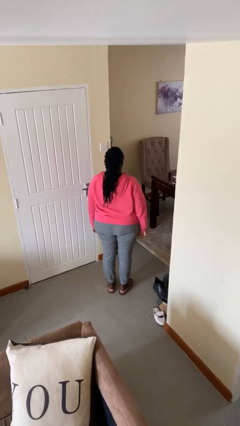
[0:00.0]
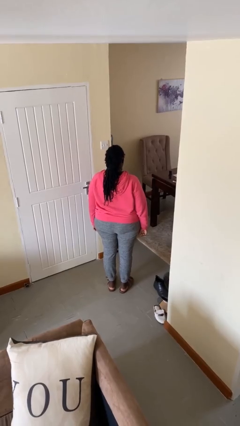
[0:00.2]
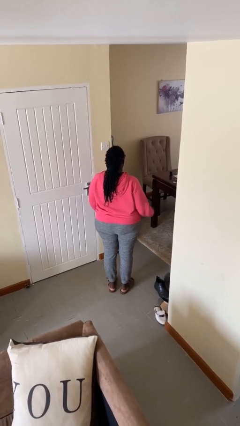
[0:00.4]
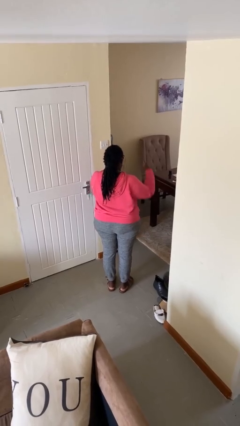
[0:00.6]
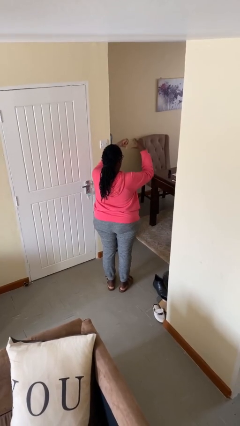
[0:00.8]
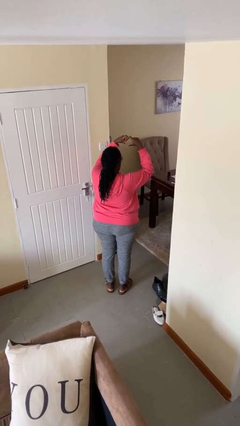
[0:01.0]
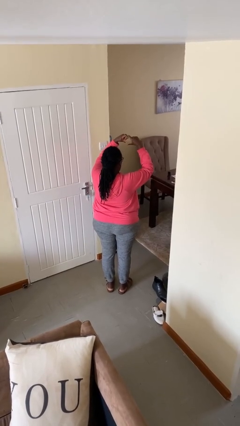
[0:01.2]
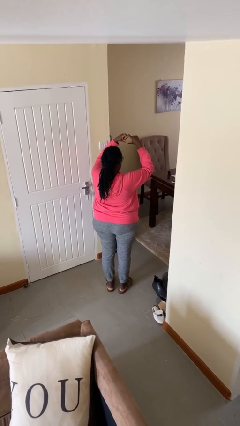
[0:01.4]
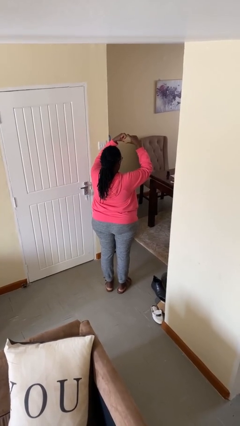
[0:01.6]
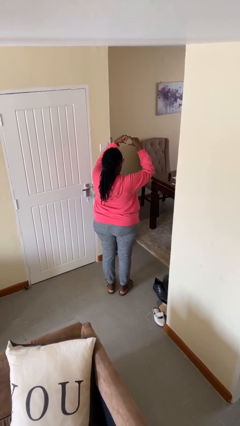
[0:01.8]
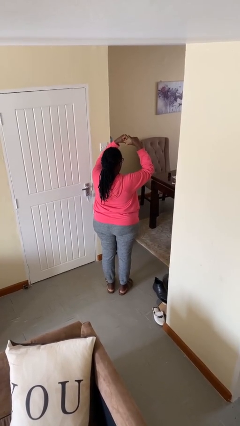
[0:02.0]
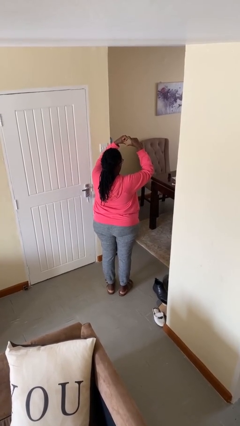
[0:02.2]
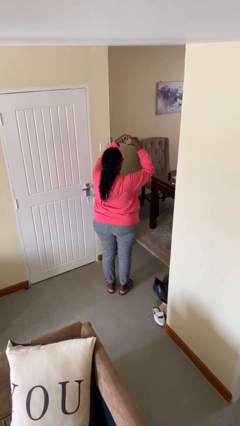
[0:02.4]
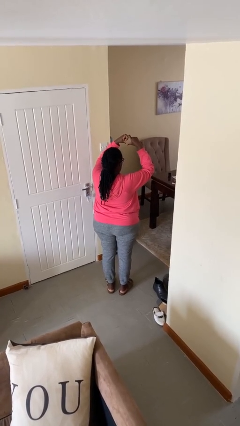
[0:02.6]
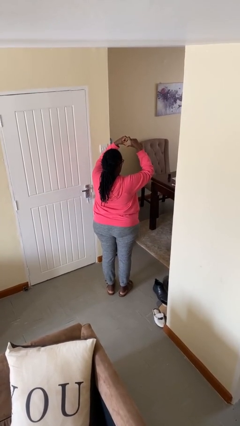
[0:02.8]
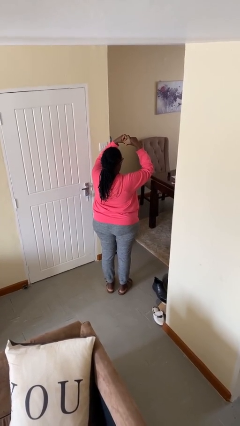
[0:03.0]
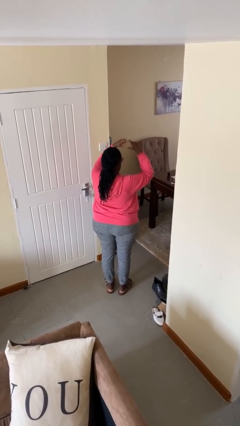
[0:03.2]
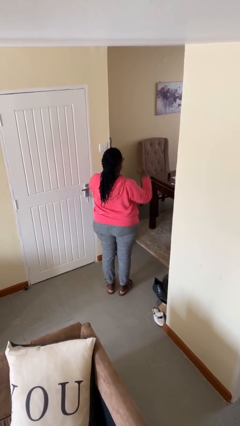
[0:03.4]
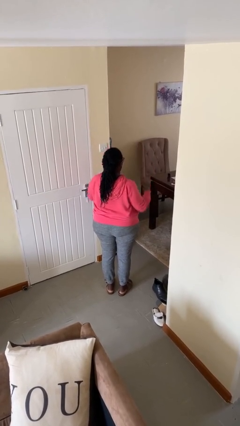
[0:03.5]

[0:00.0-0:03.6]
person gestures heart

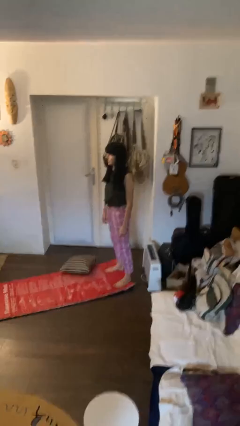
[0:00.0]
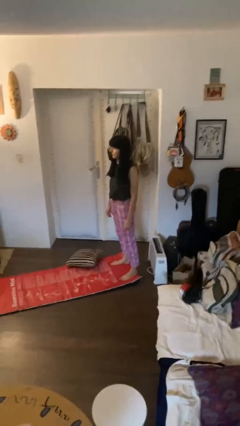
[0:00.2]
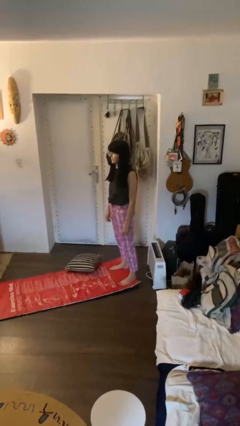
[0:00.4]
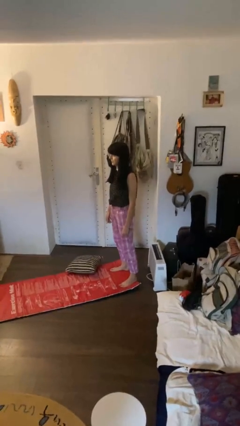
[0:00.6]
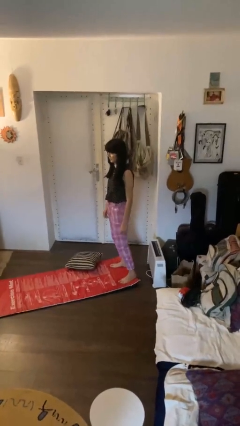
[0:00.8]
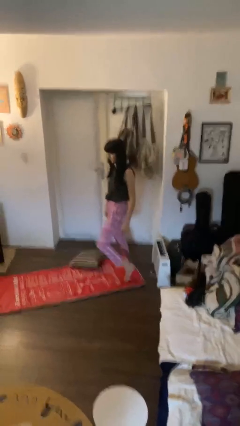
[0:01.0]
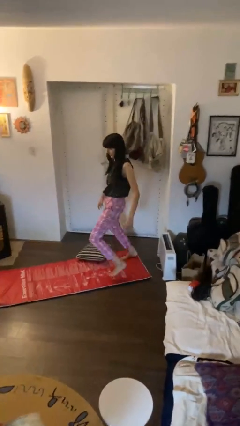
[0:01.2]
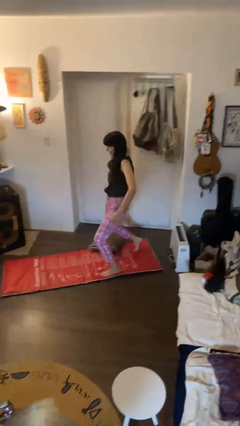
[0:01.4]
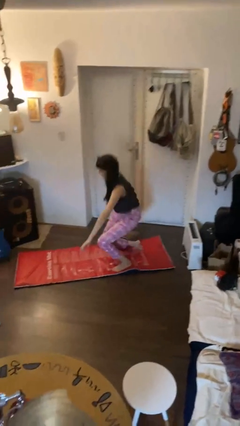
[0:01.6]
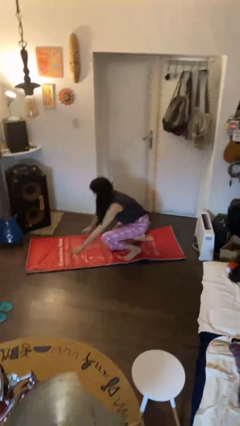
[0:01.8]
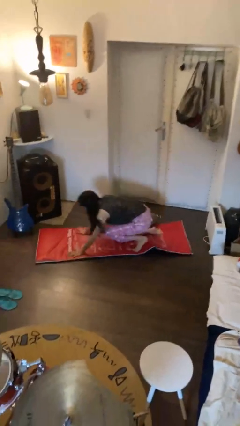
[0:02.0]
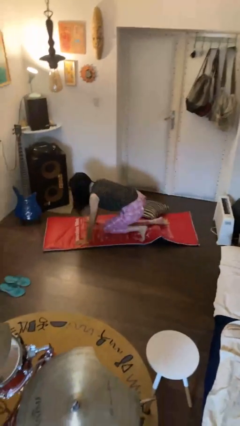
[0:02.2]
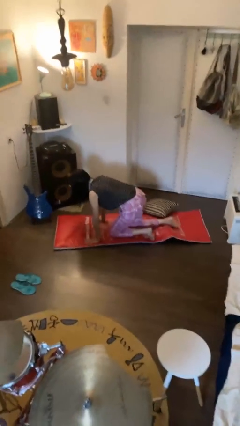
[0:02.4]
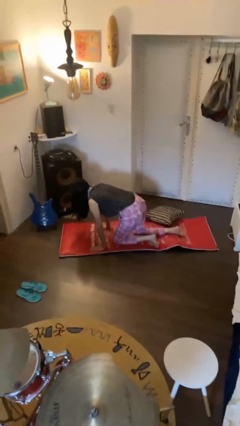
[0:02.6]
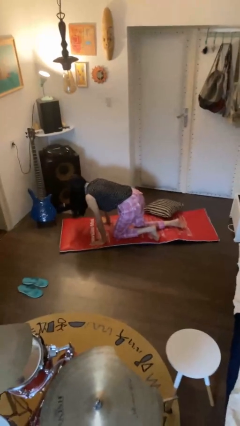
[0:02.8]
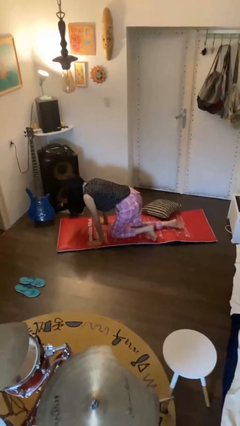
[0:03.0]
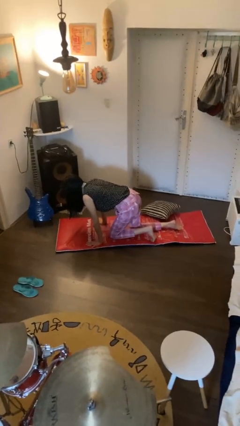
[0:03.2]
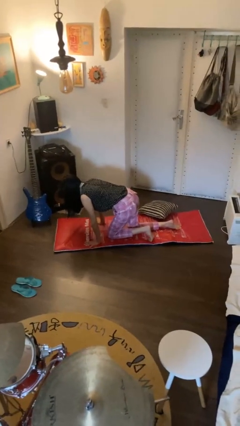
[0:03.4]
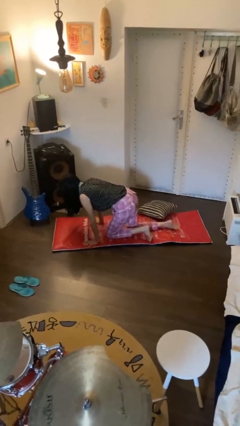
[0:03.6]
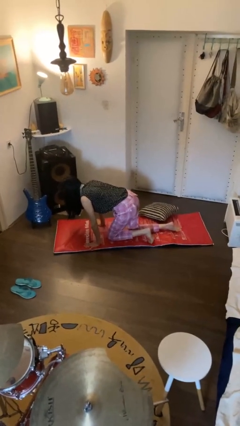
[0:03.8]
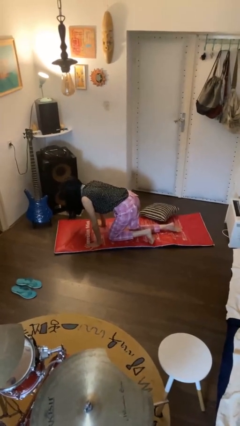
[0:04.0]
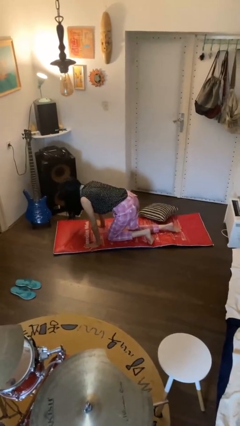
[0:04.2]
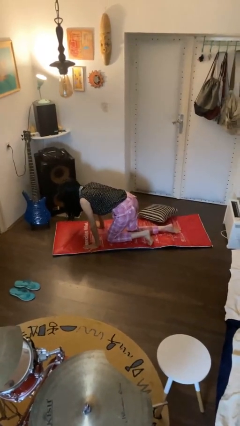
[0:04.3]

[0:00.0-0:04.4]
person trips on object on floor

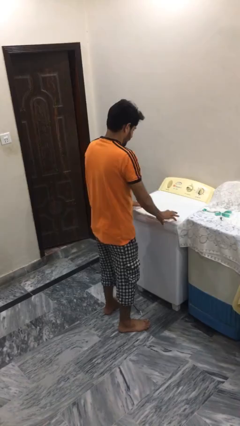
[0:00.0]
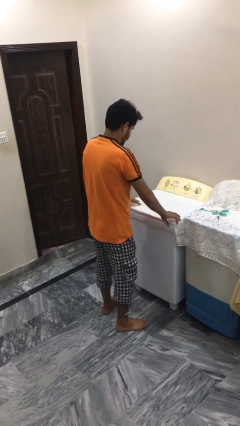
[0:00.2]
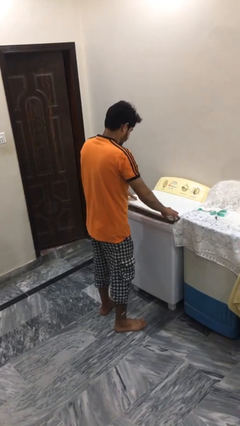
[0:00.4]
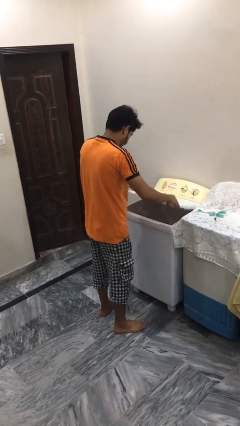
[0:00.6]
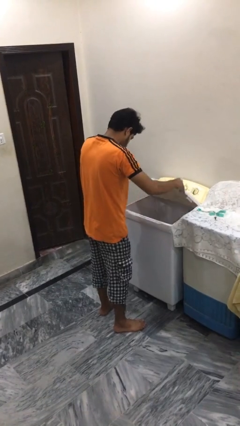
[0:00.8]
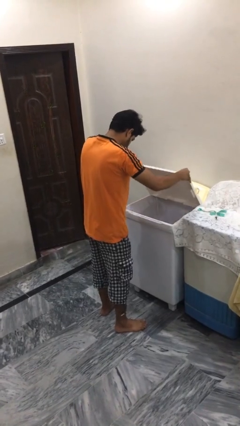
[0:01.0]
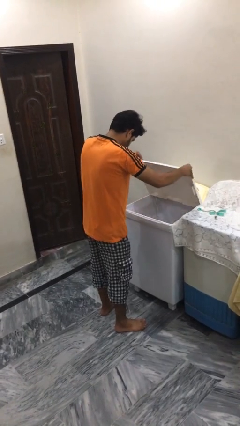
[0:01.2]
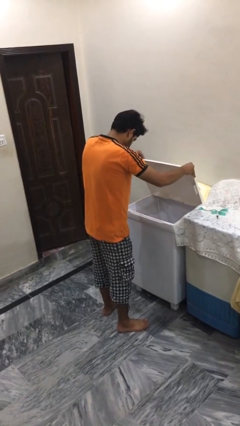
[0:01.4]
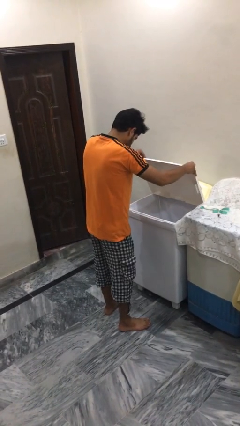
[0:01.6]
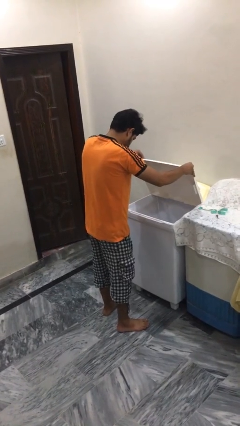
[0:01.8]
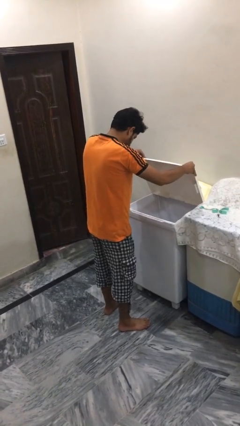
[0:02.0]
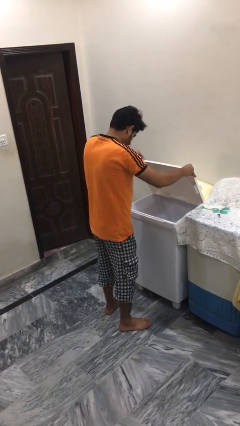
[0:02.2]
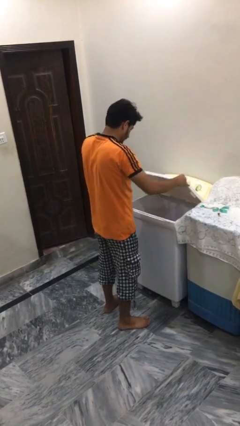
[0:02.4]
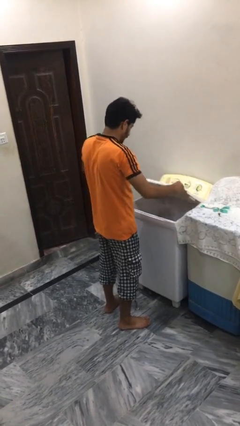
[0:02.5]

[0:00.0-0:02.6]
person opens clothes washer

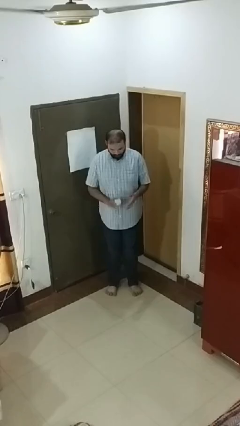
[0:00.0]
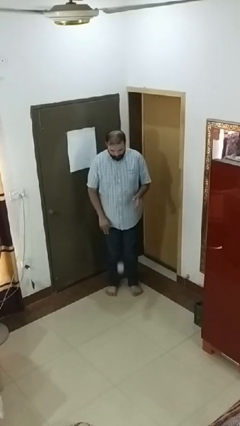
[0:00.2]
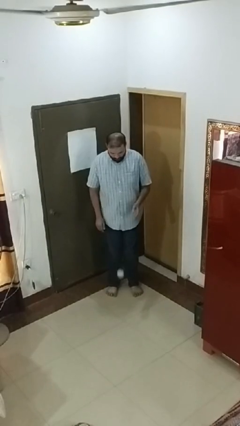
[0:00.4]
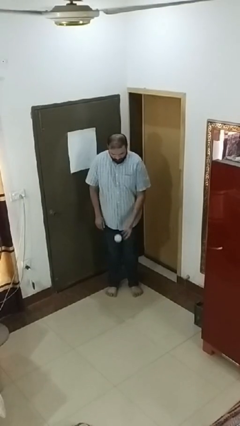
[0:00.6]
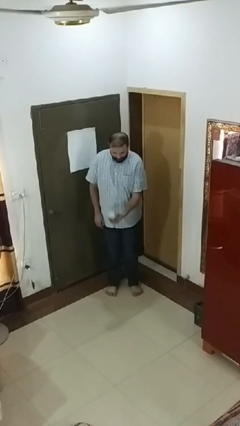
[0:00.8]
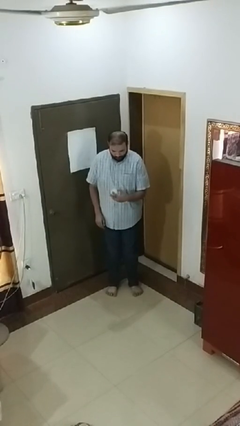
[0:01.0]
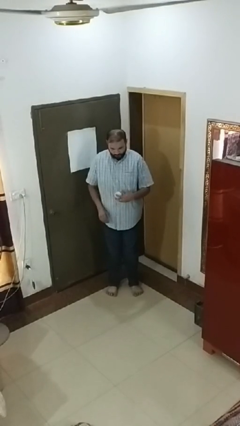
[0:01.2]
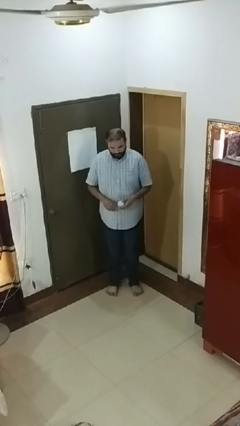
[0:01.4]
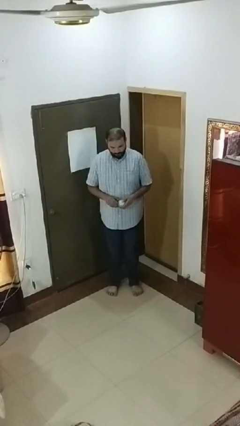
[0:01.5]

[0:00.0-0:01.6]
person bounces ball on floor

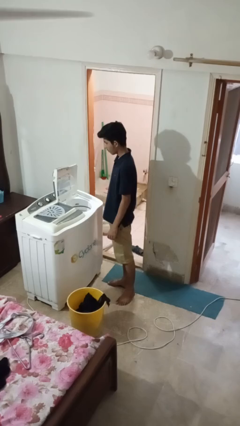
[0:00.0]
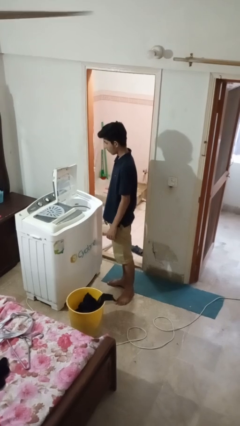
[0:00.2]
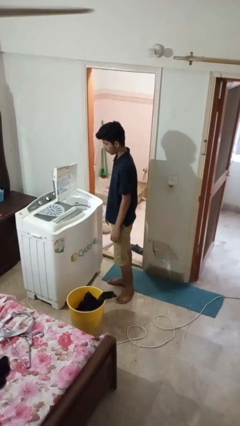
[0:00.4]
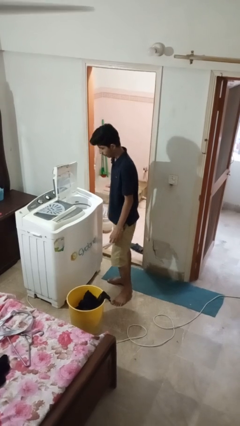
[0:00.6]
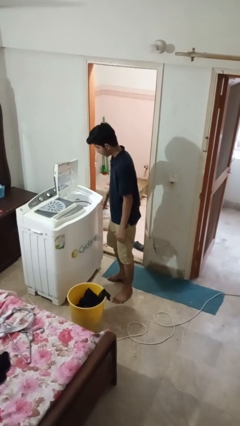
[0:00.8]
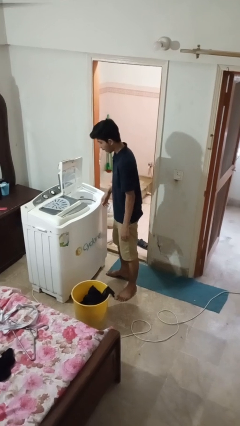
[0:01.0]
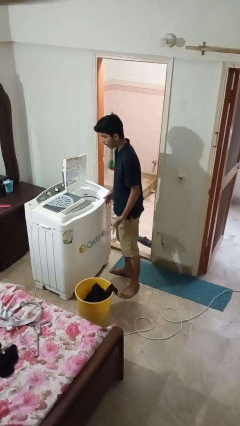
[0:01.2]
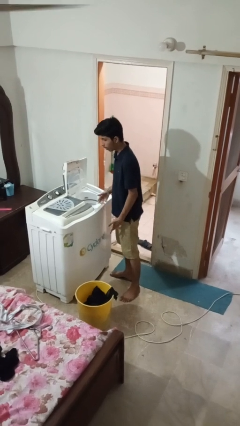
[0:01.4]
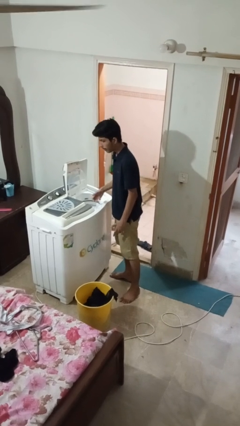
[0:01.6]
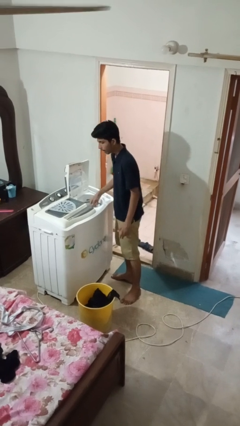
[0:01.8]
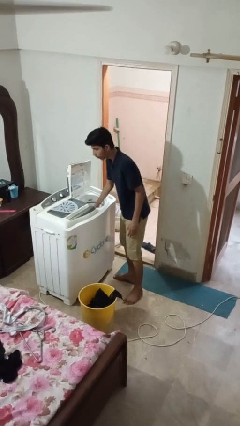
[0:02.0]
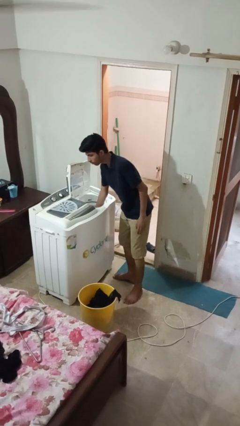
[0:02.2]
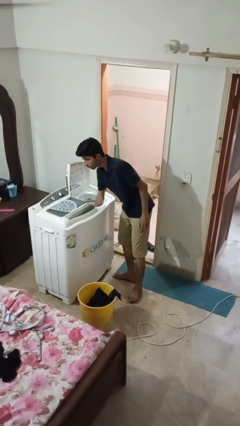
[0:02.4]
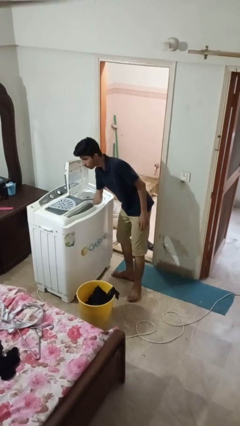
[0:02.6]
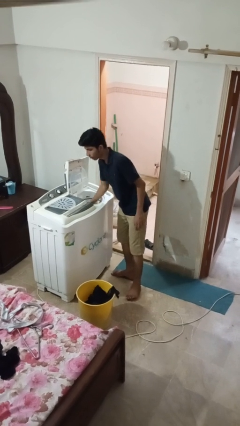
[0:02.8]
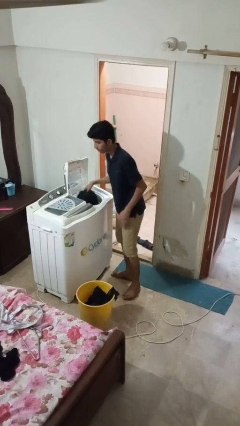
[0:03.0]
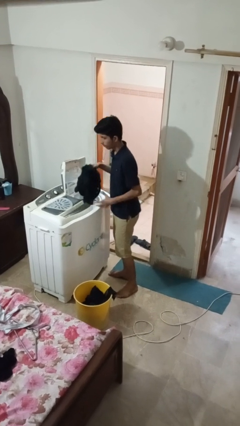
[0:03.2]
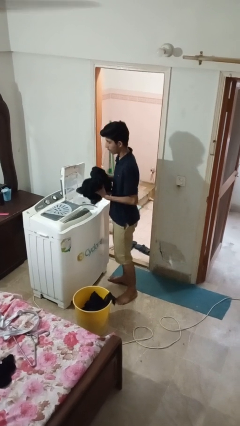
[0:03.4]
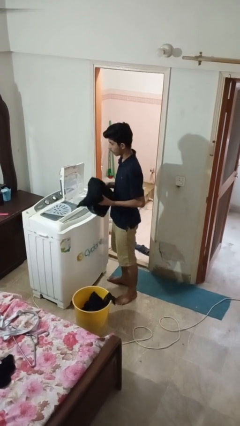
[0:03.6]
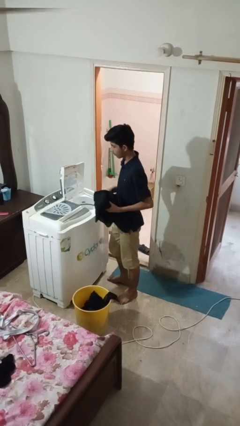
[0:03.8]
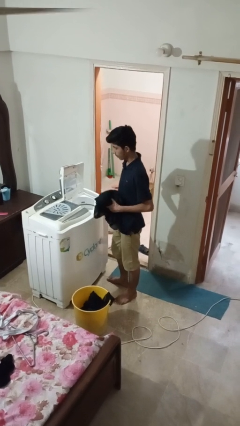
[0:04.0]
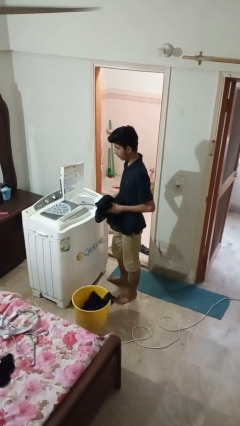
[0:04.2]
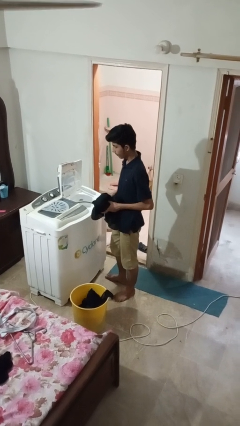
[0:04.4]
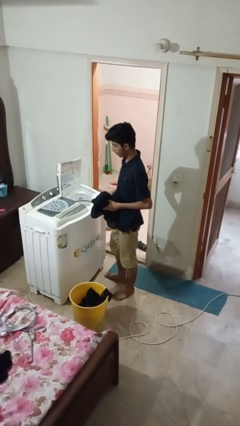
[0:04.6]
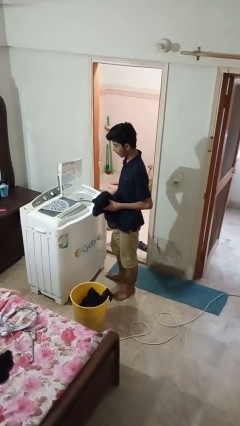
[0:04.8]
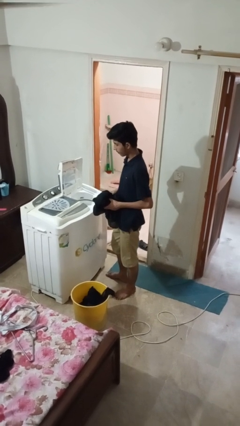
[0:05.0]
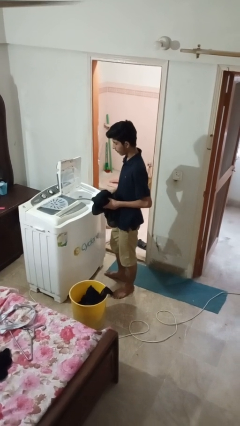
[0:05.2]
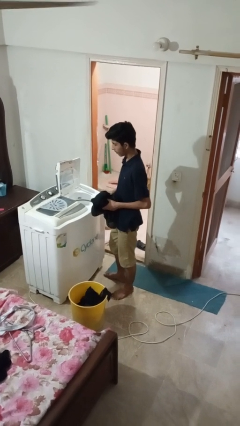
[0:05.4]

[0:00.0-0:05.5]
person unloads dryer
